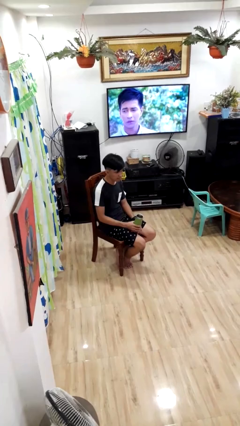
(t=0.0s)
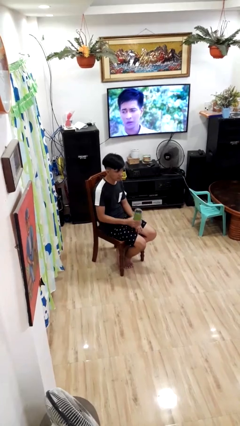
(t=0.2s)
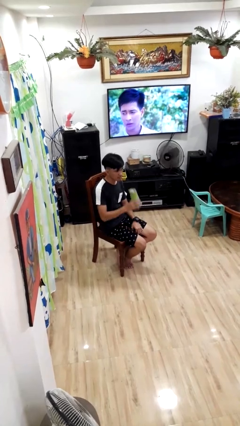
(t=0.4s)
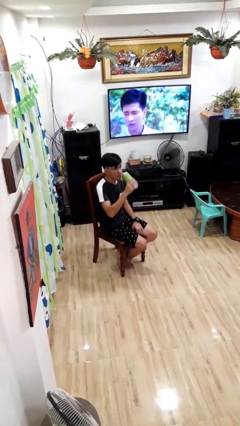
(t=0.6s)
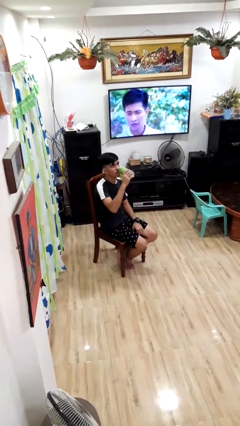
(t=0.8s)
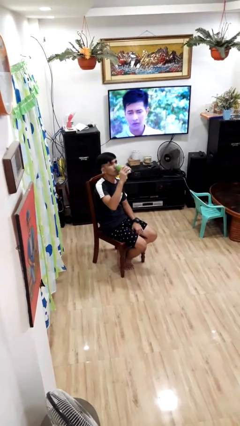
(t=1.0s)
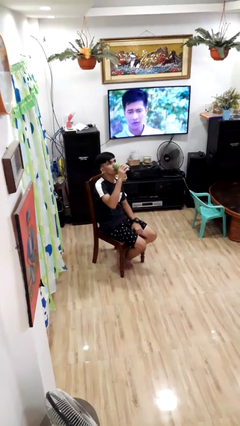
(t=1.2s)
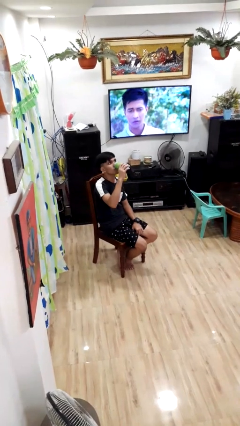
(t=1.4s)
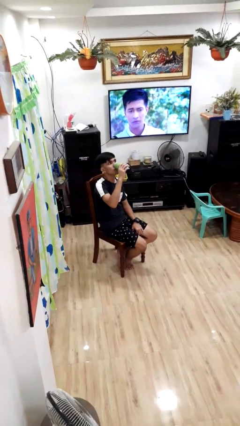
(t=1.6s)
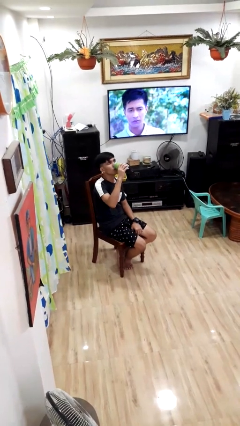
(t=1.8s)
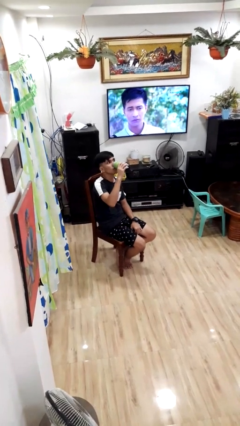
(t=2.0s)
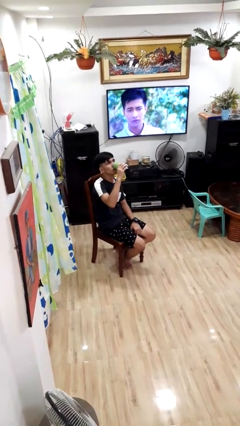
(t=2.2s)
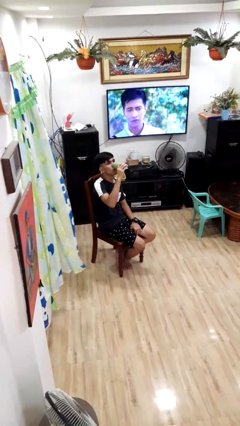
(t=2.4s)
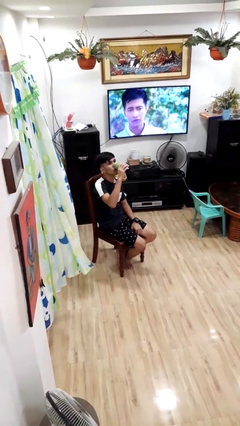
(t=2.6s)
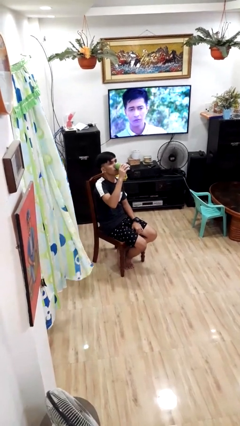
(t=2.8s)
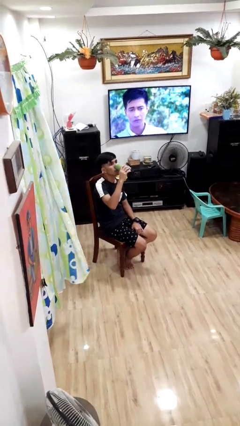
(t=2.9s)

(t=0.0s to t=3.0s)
person drinks from bottle

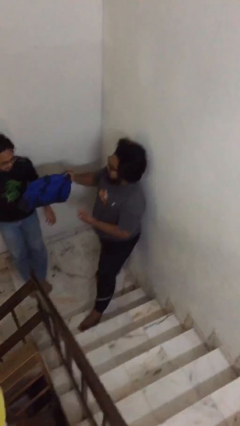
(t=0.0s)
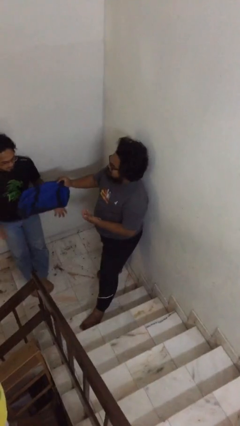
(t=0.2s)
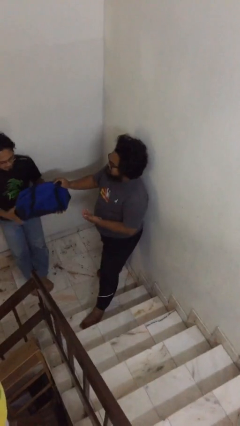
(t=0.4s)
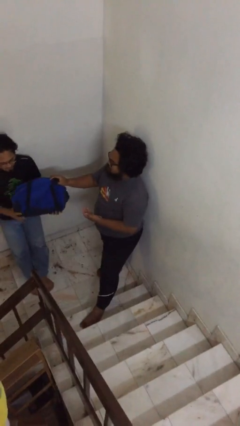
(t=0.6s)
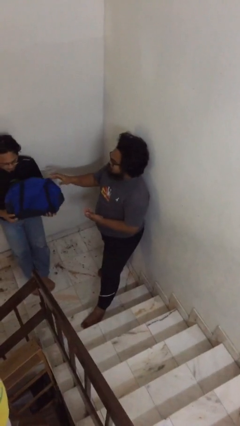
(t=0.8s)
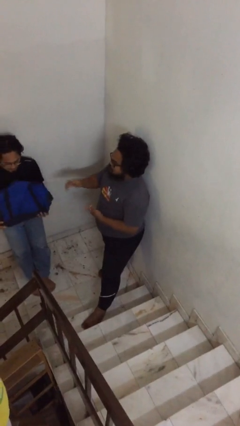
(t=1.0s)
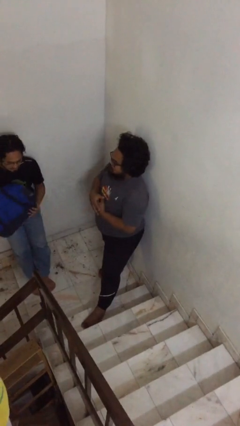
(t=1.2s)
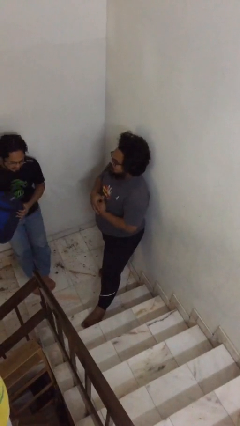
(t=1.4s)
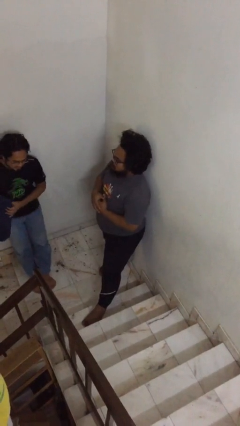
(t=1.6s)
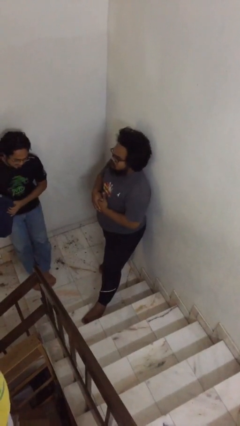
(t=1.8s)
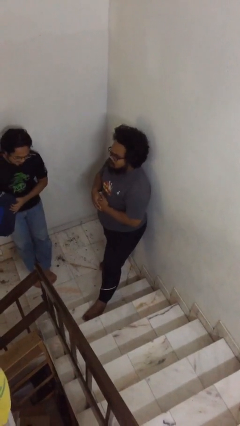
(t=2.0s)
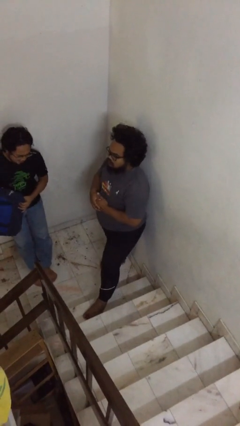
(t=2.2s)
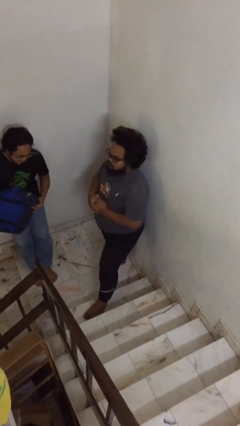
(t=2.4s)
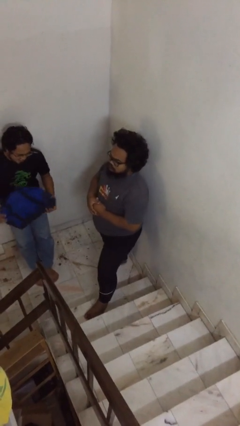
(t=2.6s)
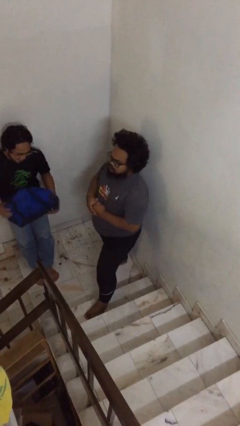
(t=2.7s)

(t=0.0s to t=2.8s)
person transfers object to person

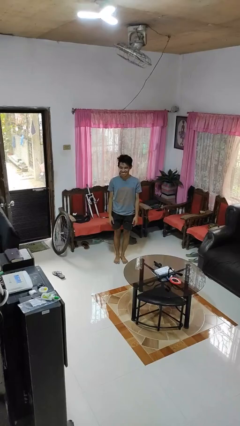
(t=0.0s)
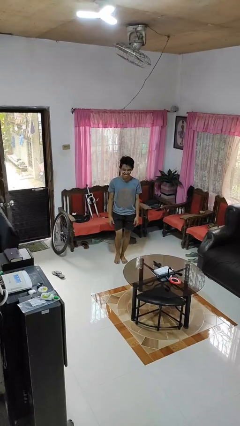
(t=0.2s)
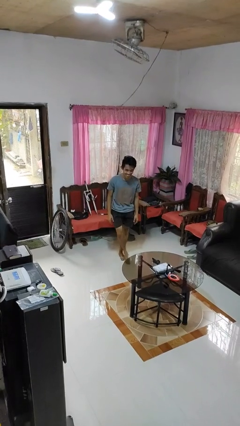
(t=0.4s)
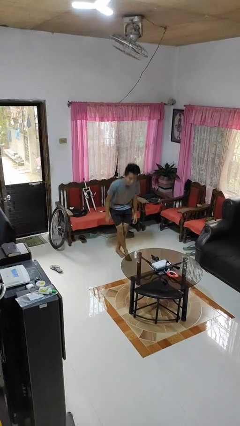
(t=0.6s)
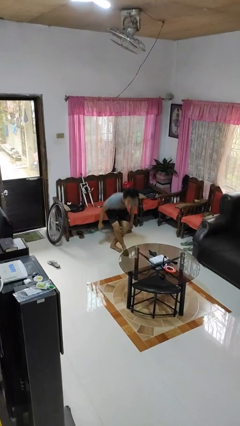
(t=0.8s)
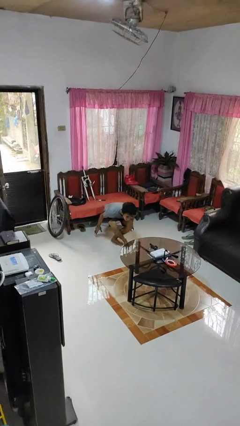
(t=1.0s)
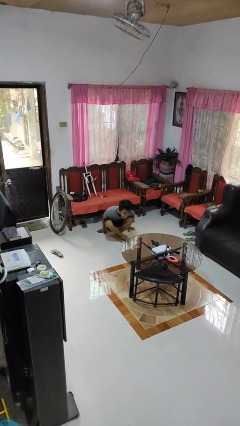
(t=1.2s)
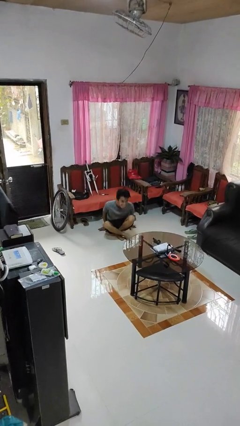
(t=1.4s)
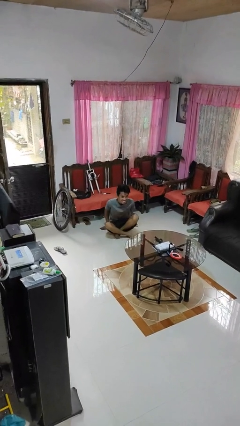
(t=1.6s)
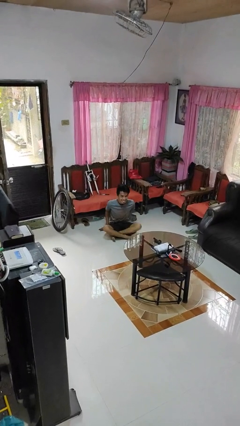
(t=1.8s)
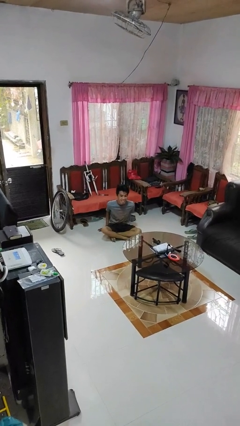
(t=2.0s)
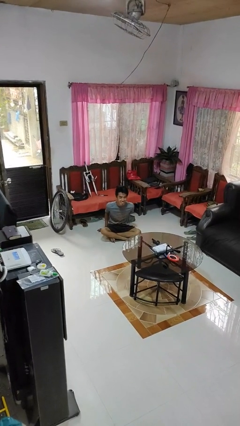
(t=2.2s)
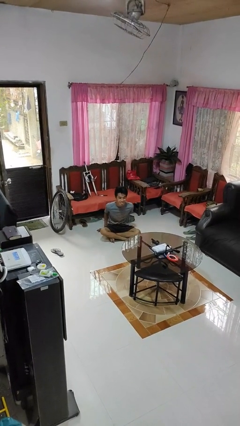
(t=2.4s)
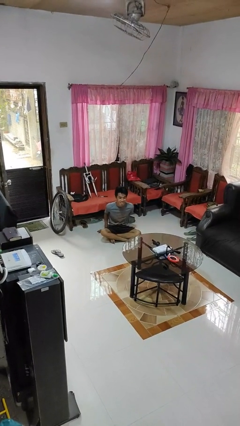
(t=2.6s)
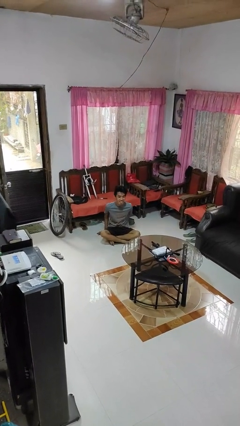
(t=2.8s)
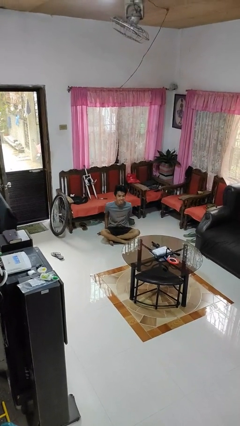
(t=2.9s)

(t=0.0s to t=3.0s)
person sits crisscross

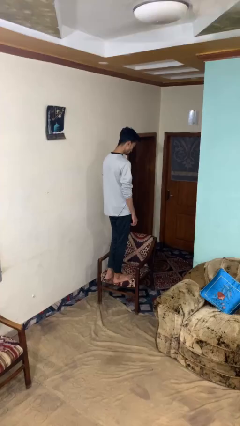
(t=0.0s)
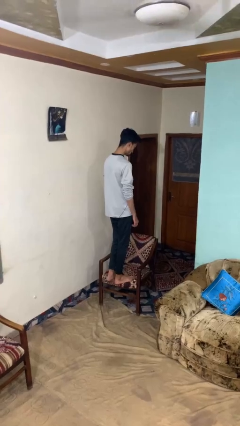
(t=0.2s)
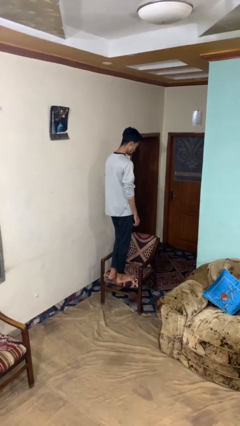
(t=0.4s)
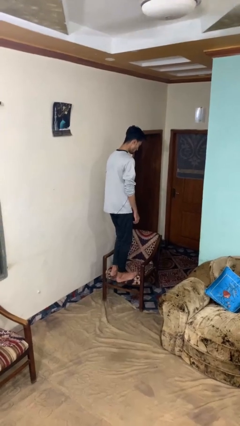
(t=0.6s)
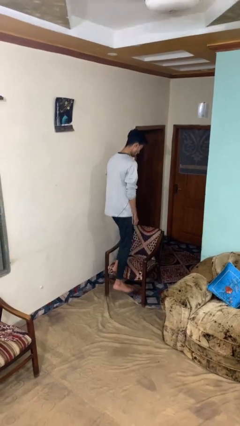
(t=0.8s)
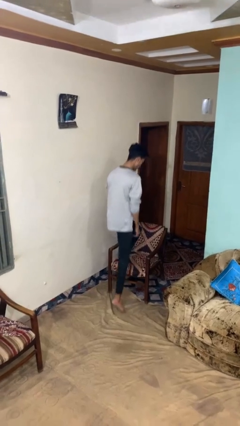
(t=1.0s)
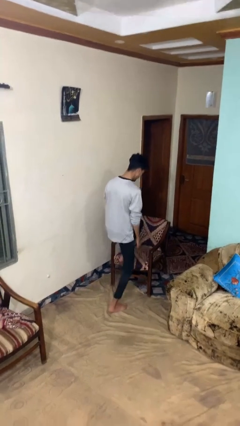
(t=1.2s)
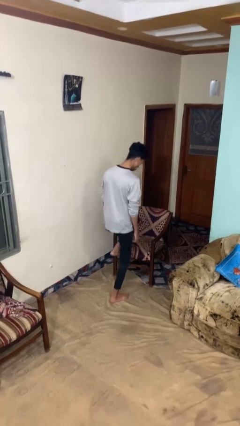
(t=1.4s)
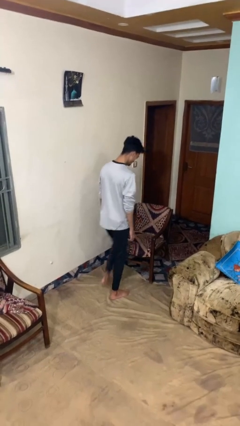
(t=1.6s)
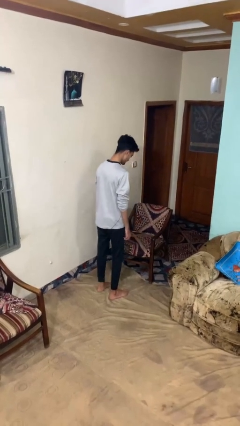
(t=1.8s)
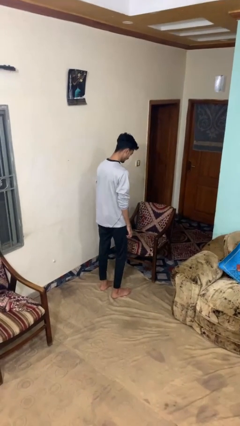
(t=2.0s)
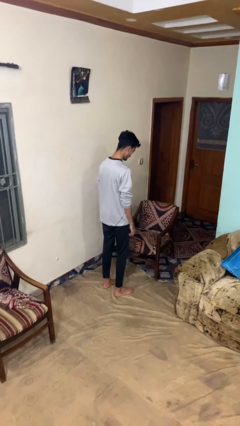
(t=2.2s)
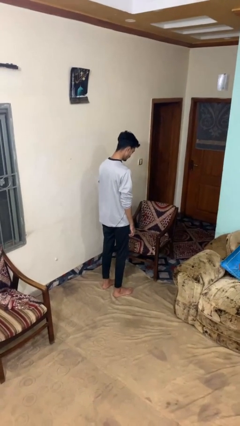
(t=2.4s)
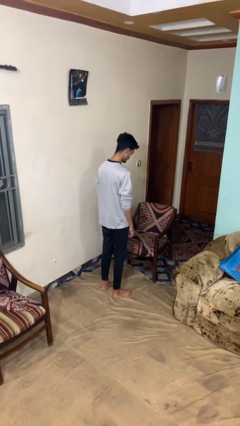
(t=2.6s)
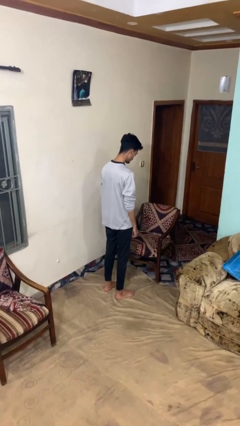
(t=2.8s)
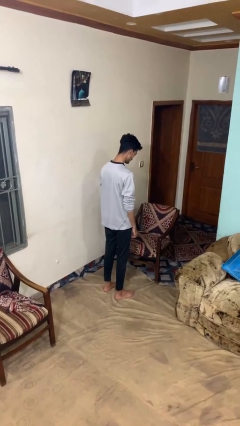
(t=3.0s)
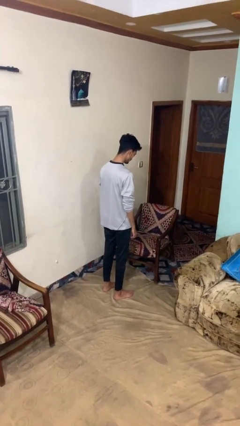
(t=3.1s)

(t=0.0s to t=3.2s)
person climbs off chair

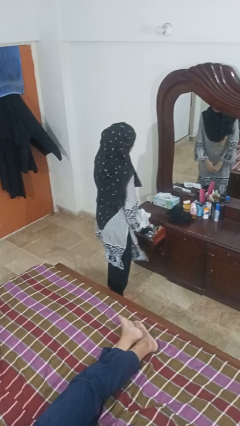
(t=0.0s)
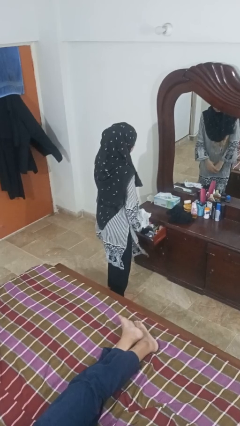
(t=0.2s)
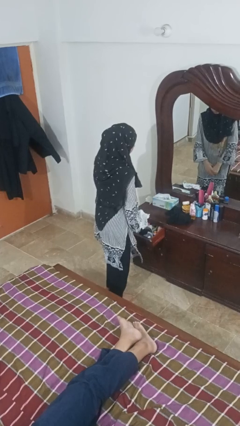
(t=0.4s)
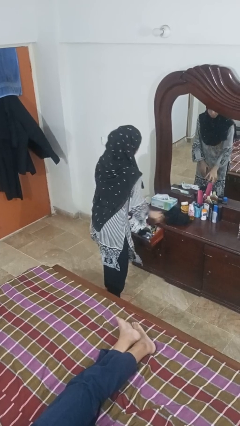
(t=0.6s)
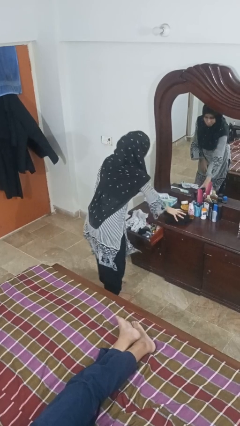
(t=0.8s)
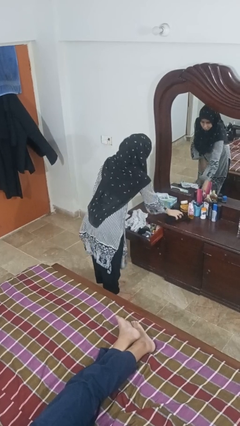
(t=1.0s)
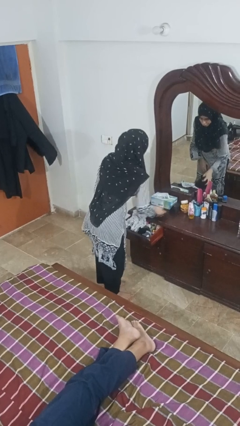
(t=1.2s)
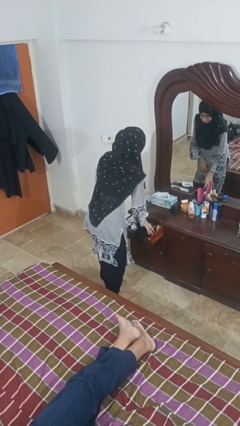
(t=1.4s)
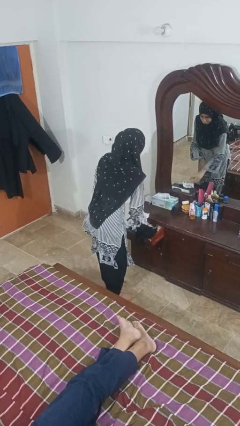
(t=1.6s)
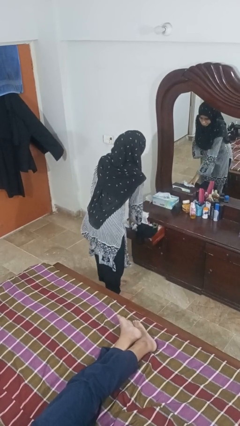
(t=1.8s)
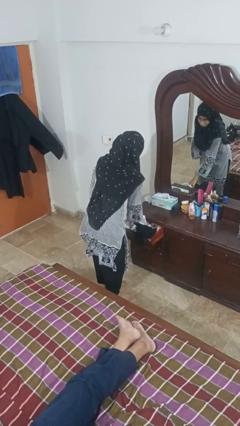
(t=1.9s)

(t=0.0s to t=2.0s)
person puts clothes into dresser

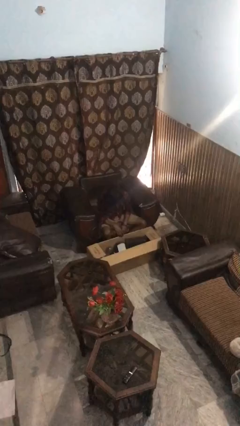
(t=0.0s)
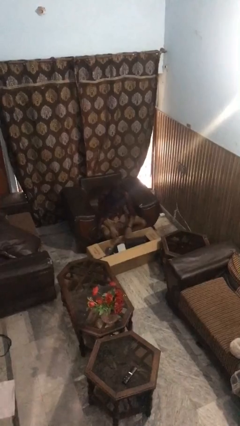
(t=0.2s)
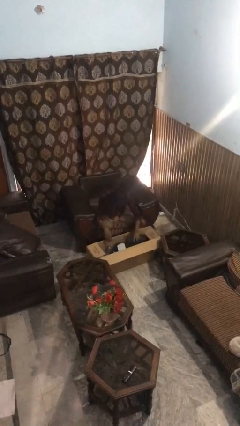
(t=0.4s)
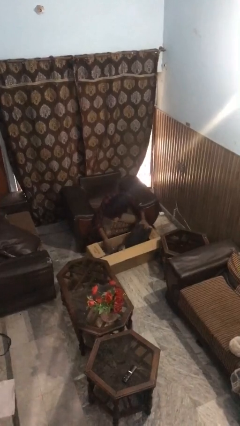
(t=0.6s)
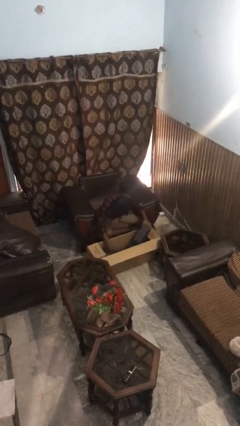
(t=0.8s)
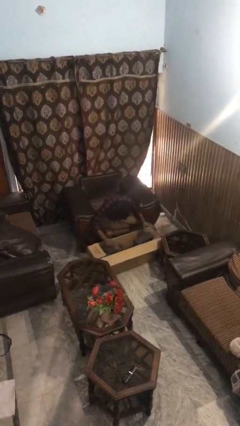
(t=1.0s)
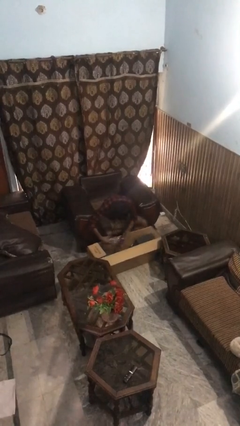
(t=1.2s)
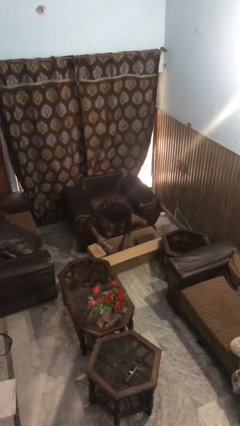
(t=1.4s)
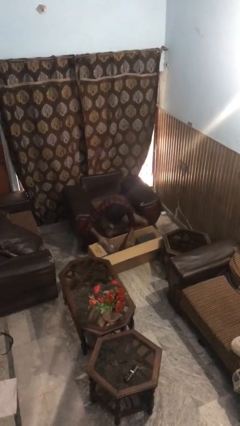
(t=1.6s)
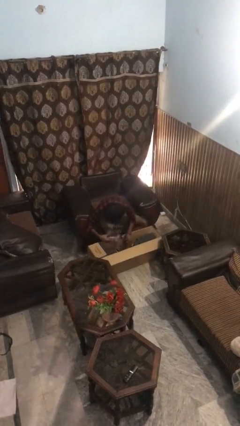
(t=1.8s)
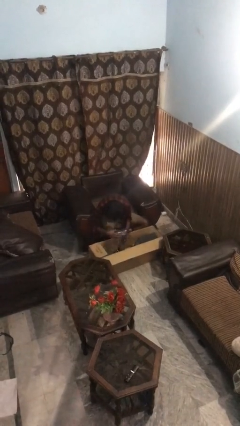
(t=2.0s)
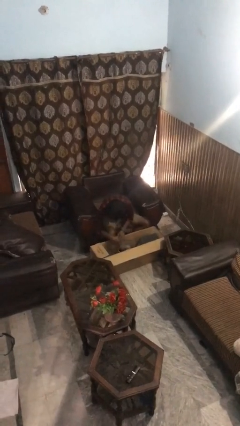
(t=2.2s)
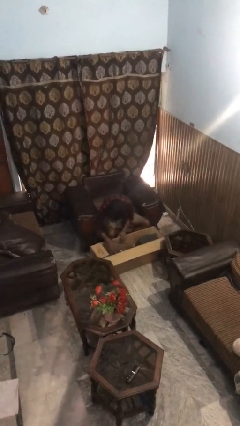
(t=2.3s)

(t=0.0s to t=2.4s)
person searches in box

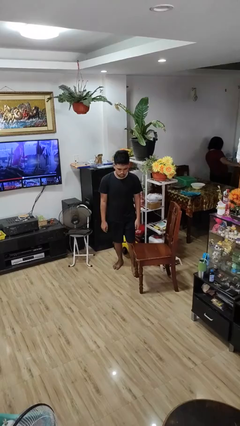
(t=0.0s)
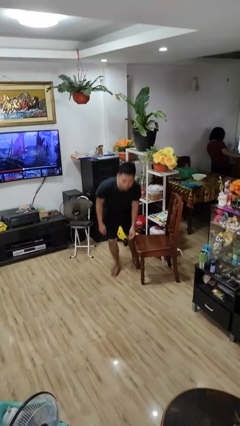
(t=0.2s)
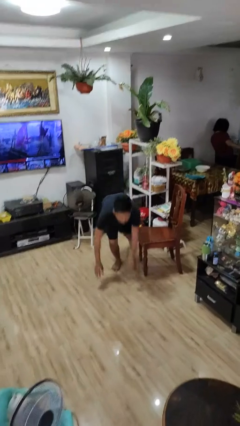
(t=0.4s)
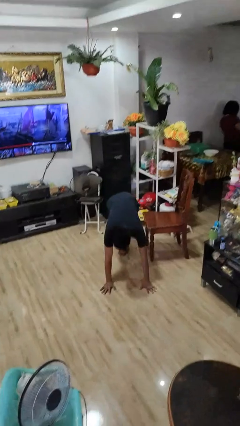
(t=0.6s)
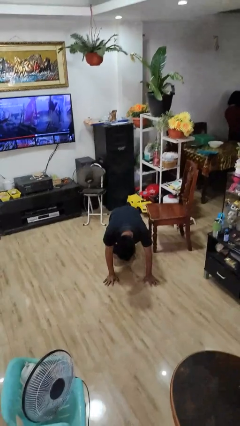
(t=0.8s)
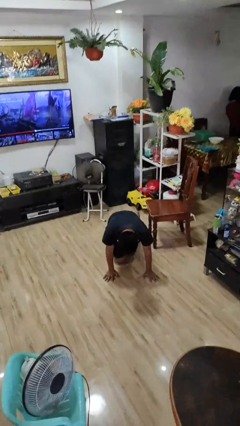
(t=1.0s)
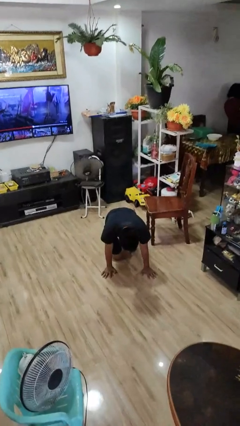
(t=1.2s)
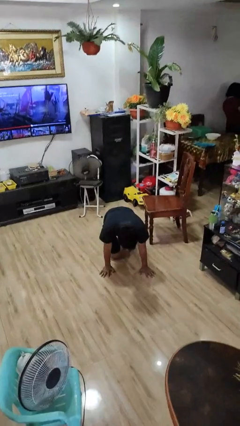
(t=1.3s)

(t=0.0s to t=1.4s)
person trips on object on floor
